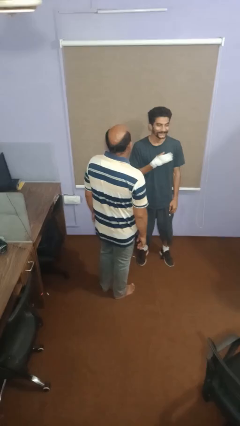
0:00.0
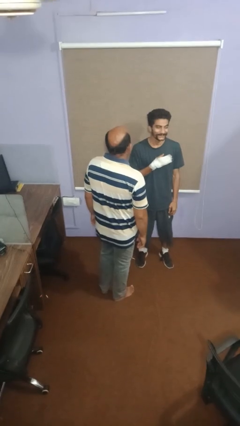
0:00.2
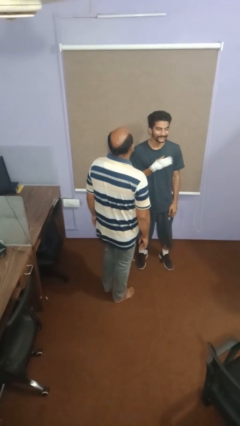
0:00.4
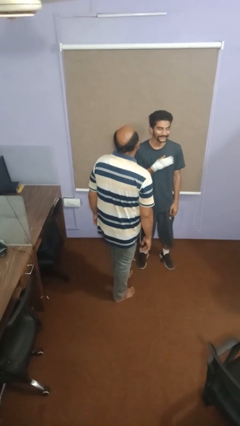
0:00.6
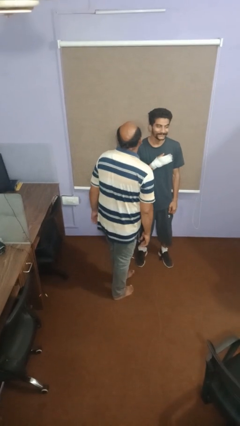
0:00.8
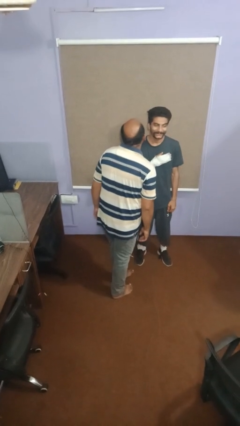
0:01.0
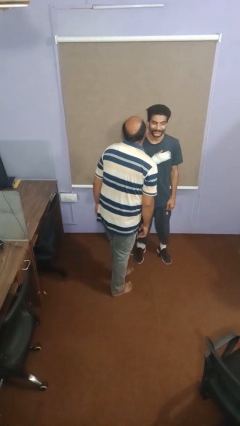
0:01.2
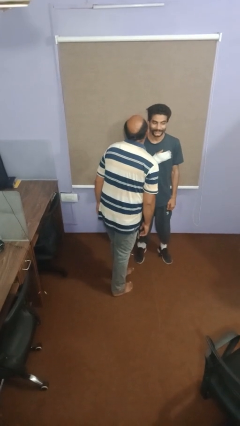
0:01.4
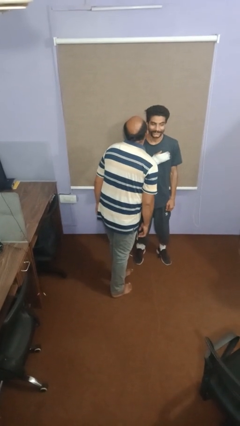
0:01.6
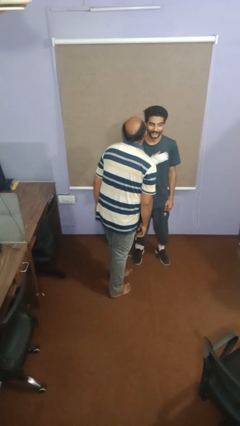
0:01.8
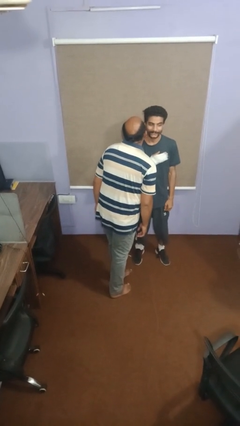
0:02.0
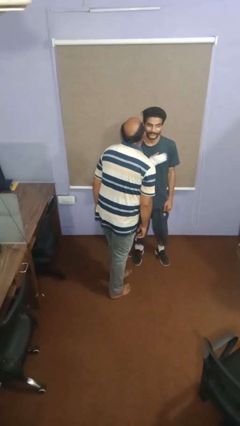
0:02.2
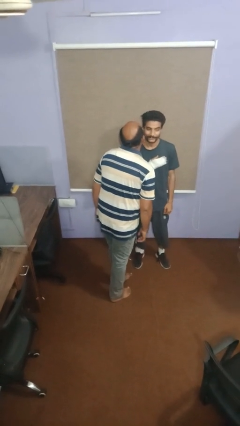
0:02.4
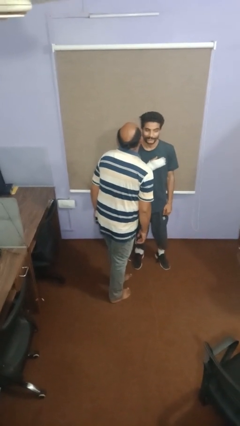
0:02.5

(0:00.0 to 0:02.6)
person kisses cheek of person

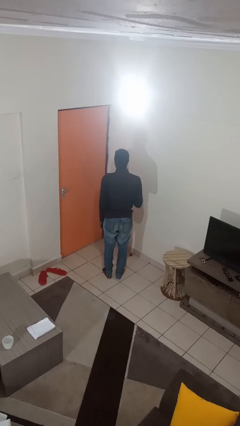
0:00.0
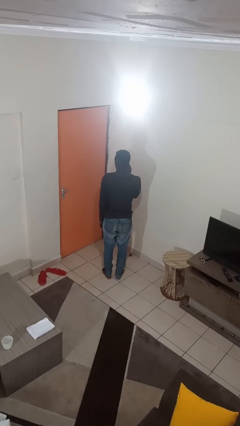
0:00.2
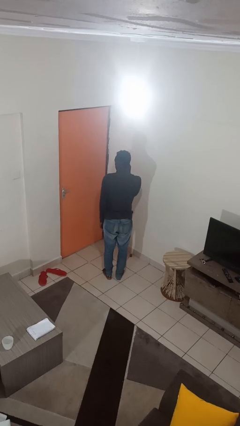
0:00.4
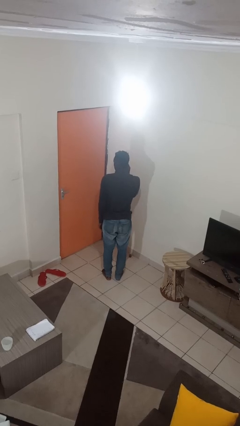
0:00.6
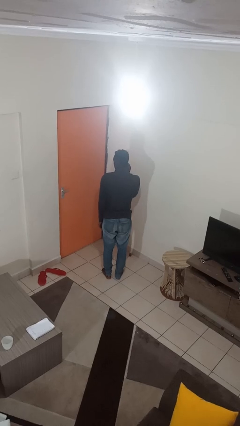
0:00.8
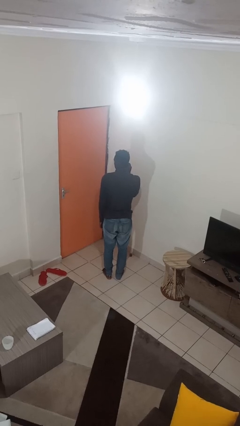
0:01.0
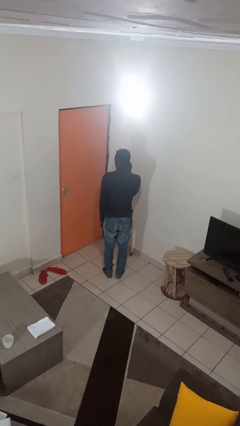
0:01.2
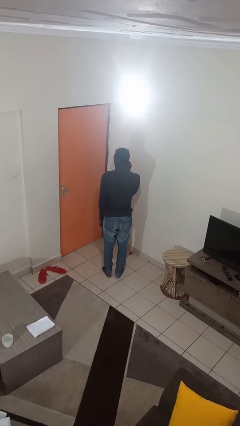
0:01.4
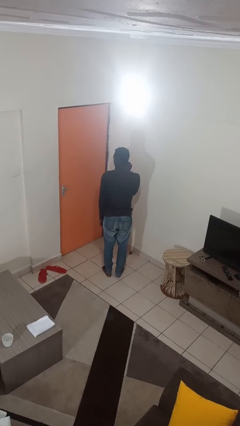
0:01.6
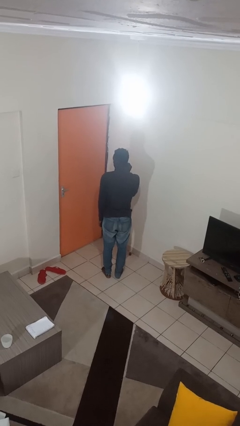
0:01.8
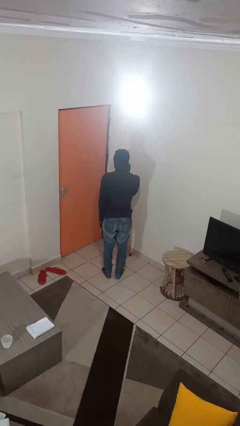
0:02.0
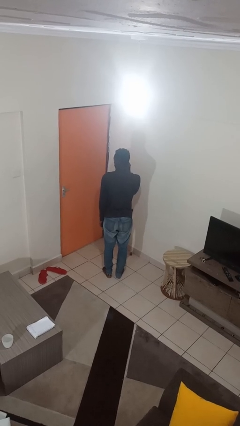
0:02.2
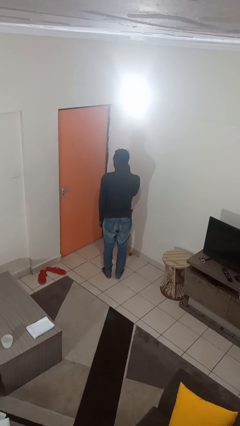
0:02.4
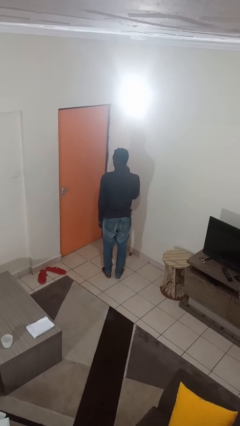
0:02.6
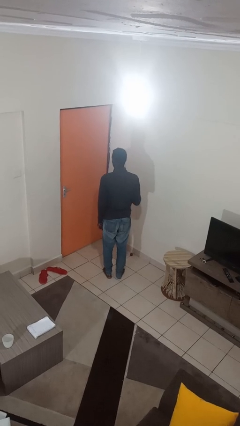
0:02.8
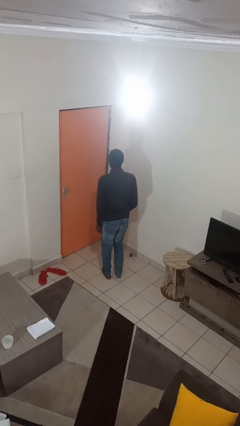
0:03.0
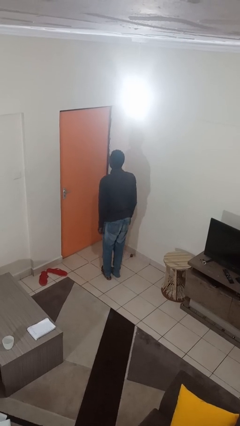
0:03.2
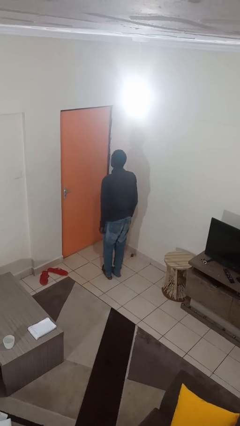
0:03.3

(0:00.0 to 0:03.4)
person touches earlobe

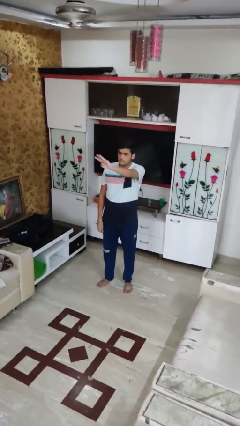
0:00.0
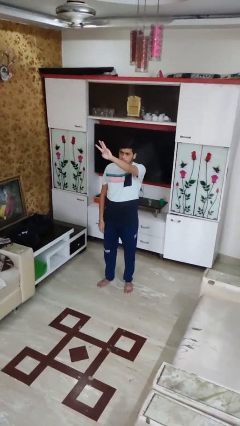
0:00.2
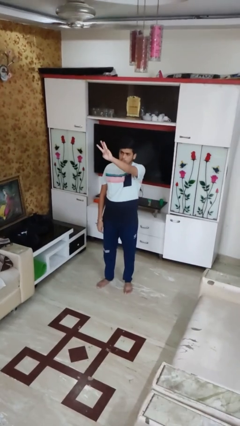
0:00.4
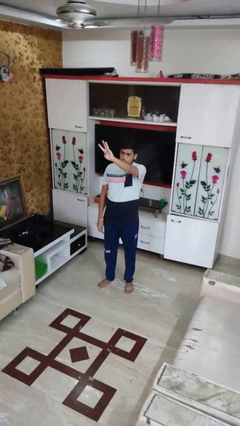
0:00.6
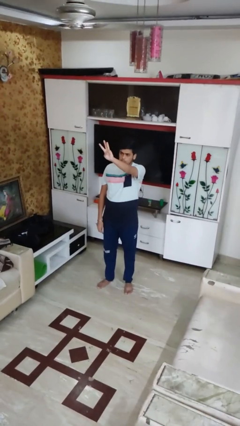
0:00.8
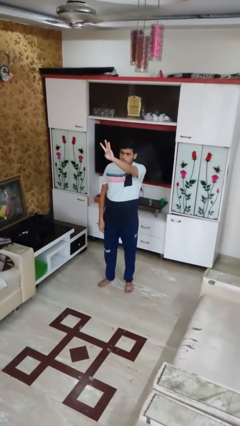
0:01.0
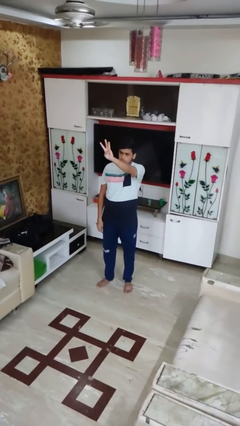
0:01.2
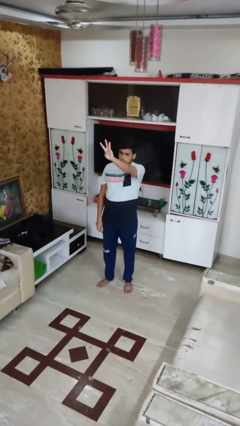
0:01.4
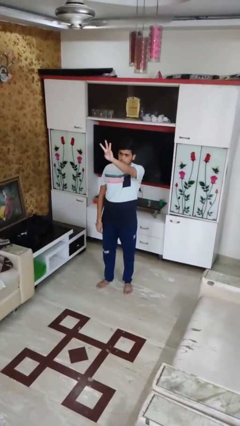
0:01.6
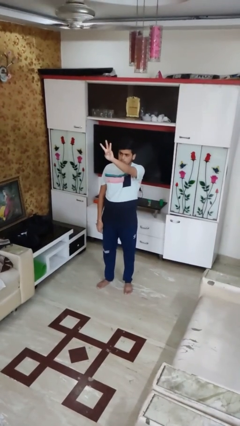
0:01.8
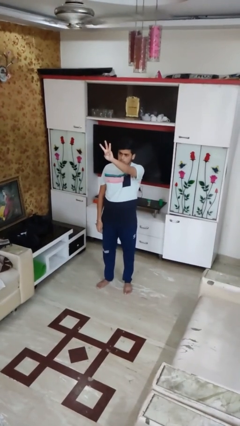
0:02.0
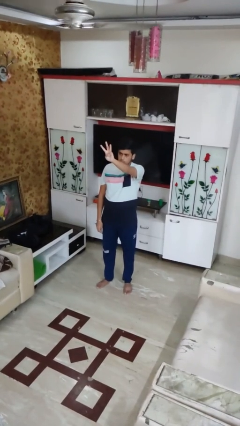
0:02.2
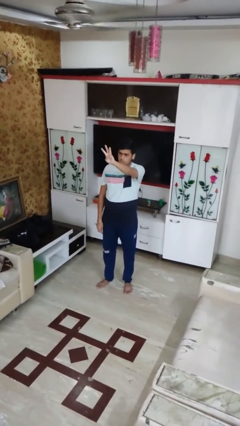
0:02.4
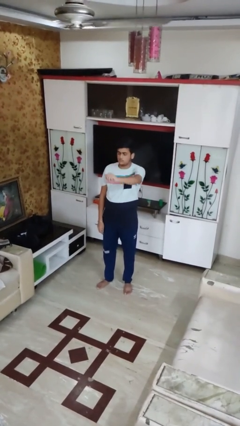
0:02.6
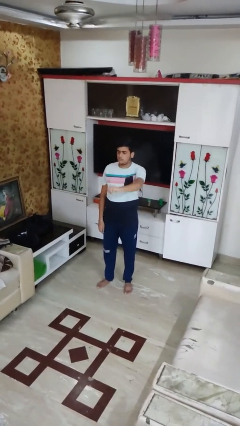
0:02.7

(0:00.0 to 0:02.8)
person gestures number three

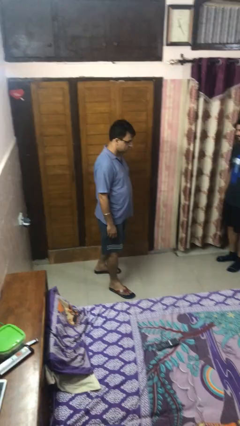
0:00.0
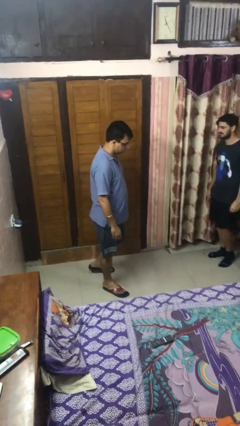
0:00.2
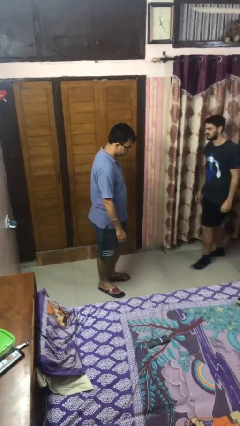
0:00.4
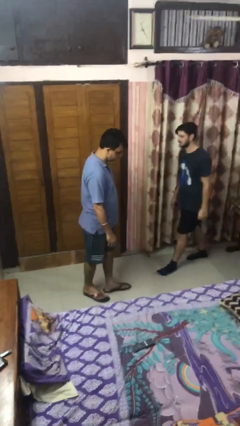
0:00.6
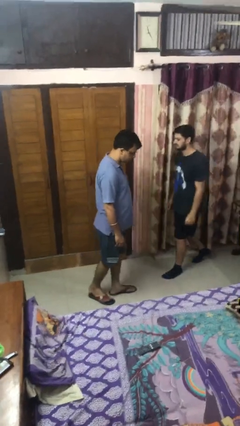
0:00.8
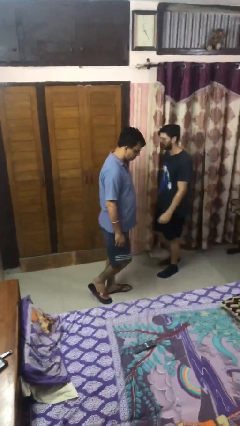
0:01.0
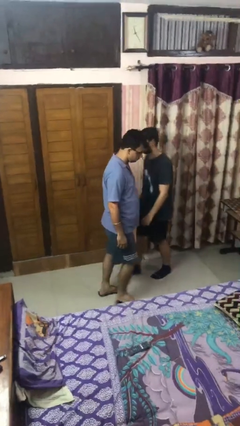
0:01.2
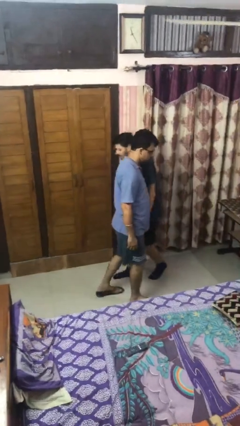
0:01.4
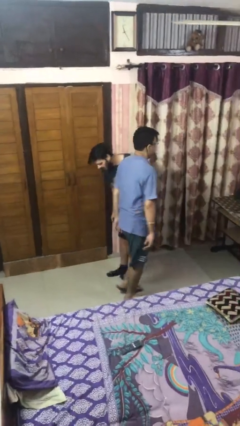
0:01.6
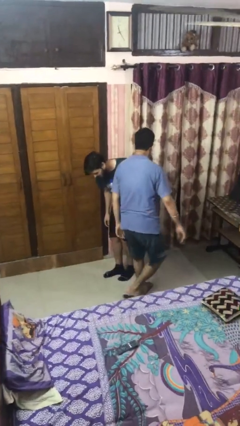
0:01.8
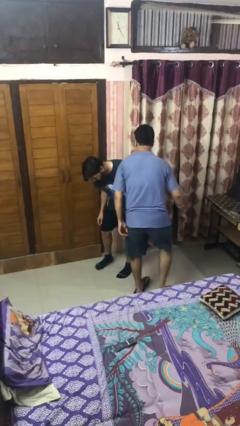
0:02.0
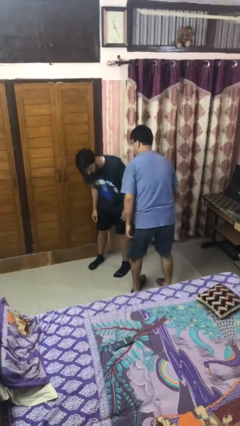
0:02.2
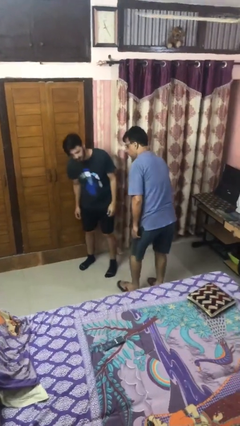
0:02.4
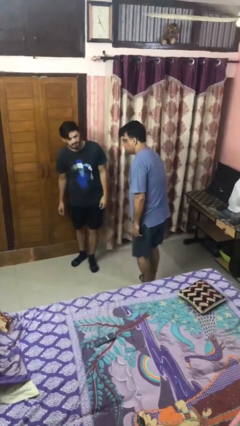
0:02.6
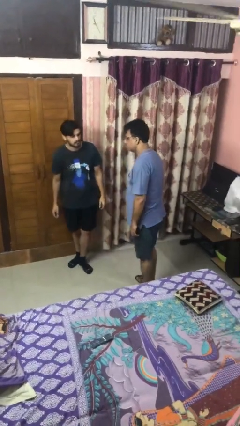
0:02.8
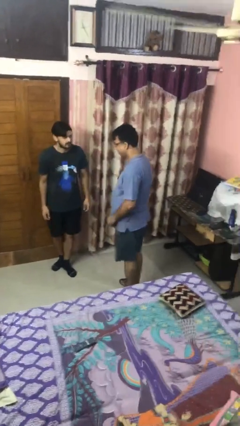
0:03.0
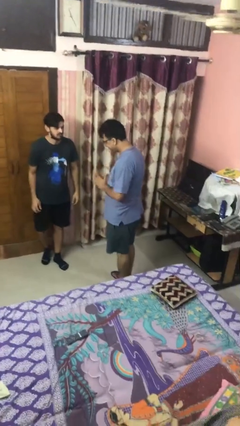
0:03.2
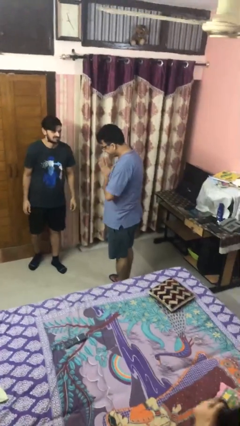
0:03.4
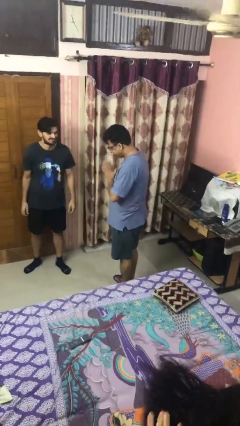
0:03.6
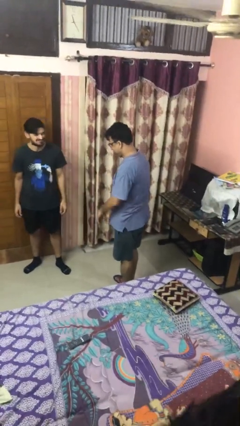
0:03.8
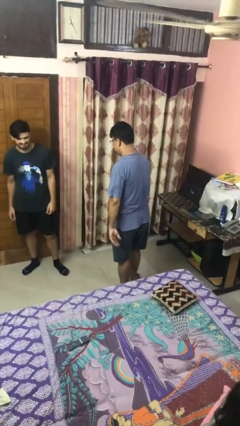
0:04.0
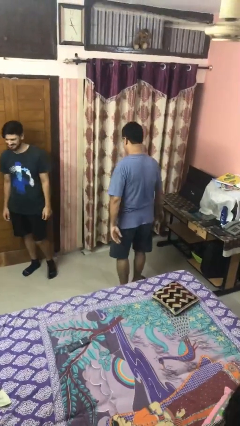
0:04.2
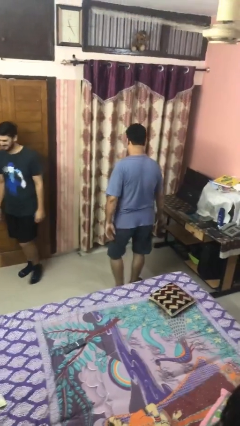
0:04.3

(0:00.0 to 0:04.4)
person bumps into person

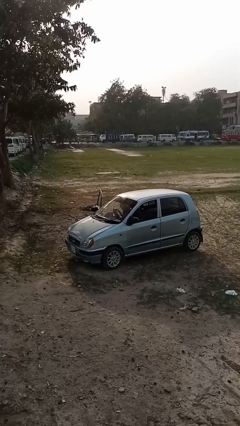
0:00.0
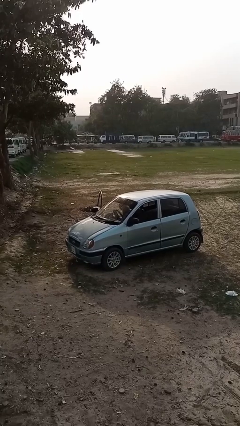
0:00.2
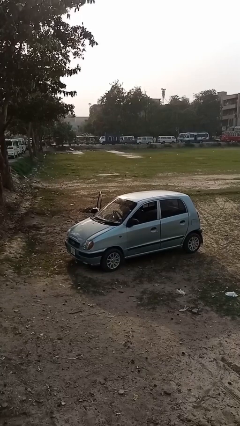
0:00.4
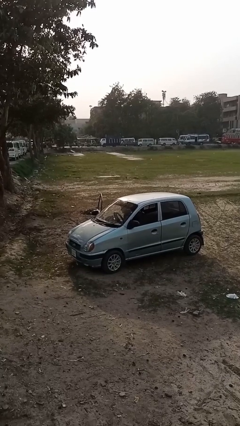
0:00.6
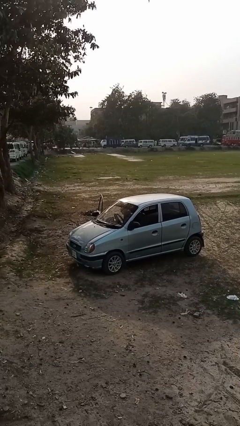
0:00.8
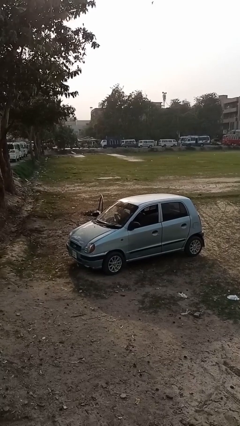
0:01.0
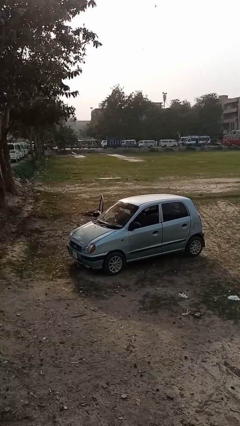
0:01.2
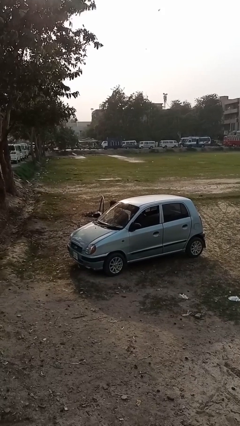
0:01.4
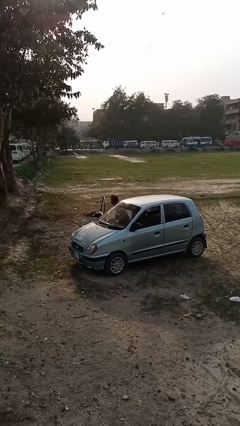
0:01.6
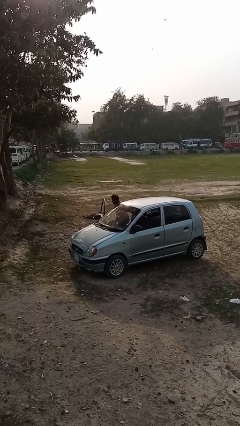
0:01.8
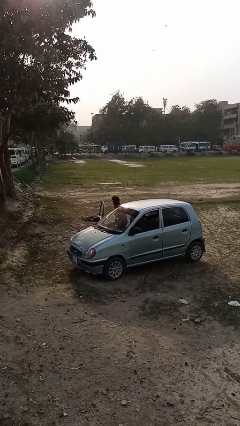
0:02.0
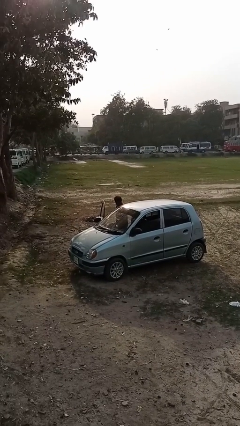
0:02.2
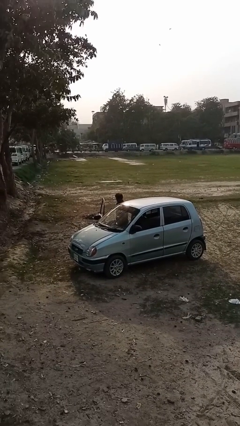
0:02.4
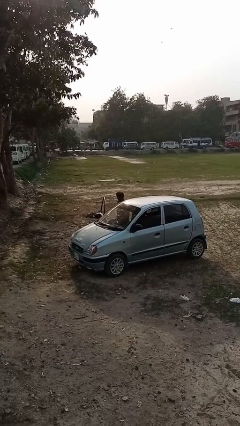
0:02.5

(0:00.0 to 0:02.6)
person exits car

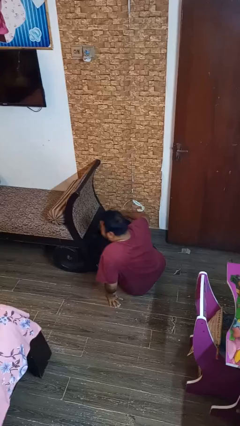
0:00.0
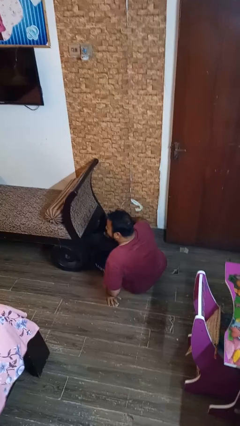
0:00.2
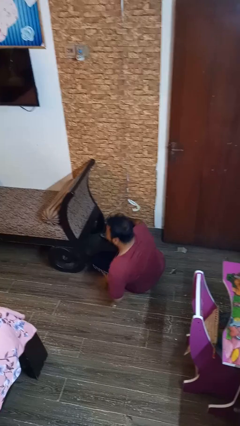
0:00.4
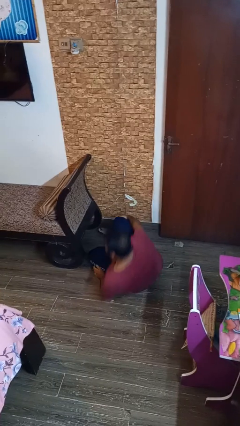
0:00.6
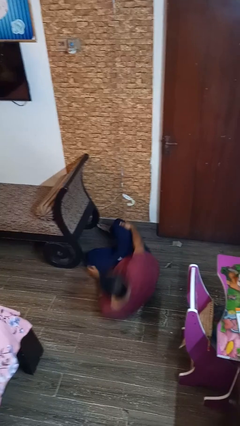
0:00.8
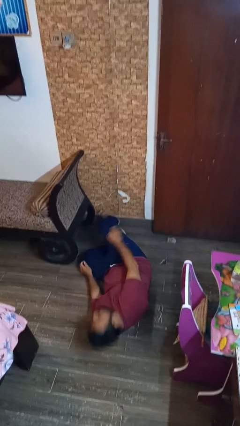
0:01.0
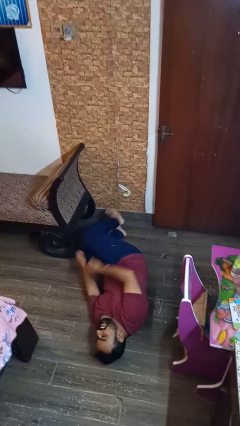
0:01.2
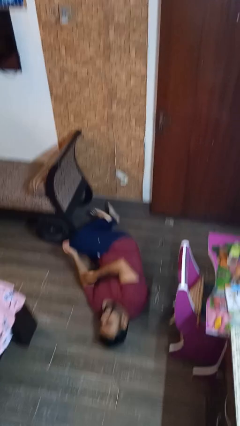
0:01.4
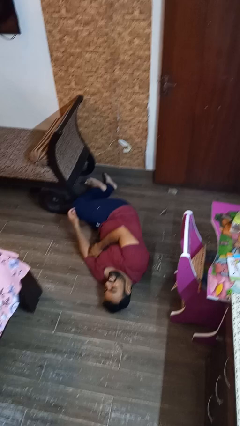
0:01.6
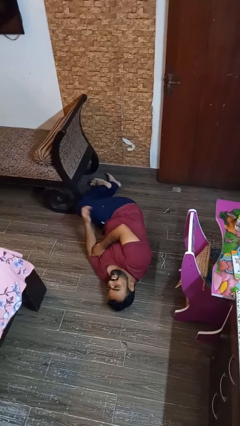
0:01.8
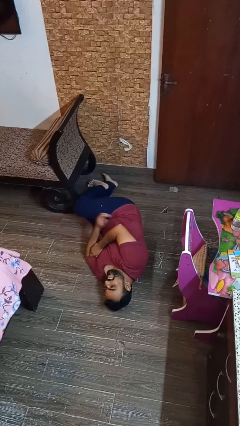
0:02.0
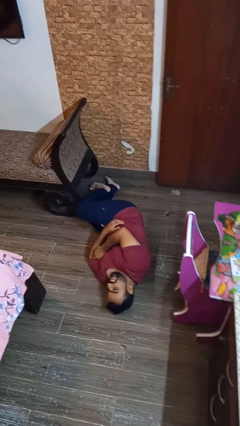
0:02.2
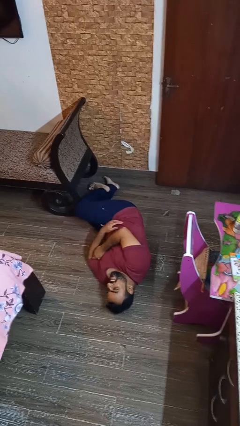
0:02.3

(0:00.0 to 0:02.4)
person lies down on floor
